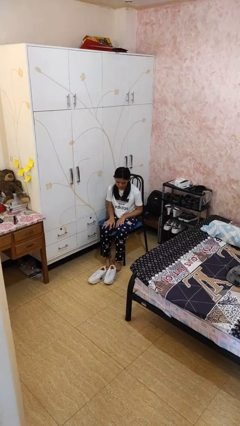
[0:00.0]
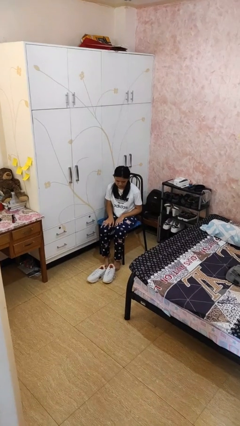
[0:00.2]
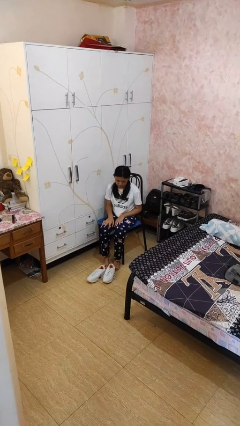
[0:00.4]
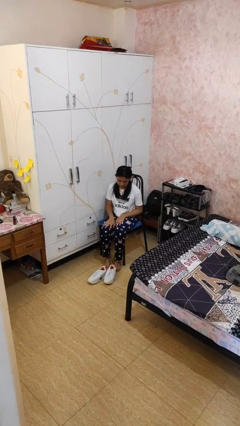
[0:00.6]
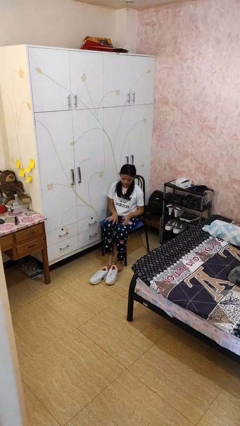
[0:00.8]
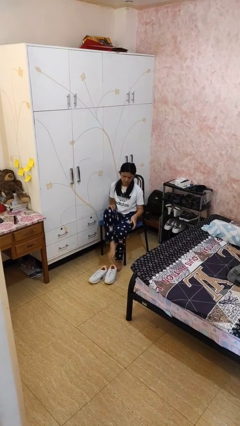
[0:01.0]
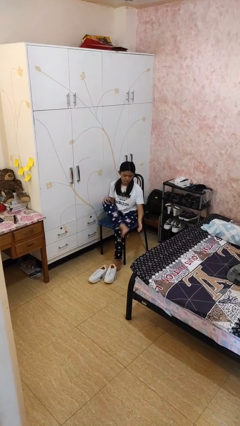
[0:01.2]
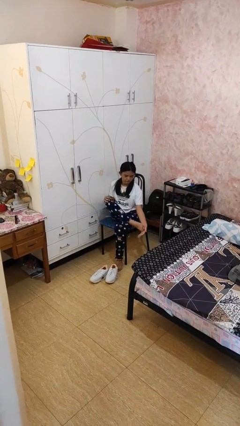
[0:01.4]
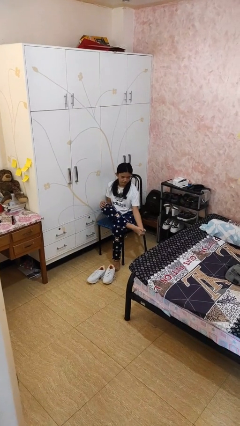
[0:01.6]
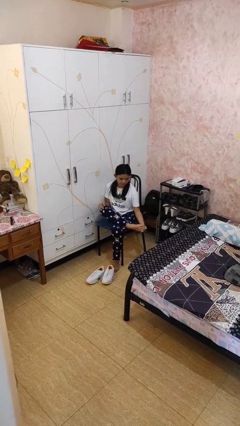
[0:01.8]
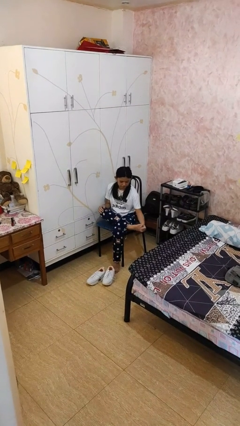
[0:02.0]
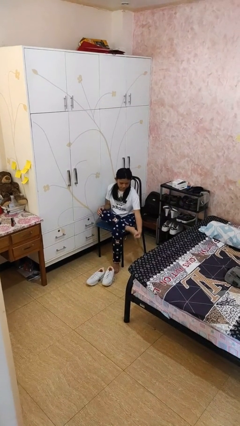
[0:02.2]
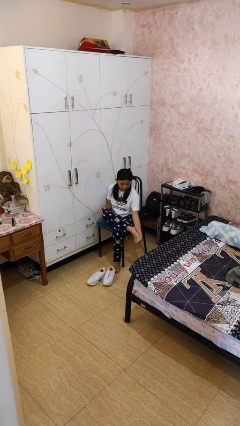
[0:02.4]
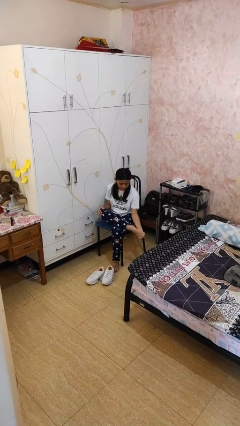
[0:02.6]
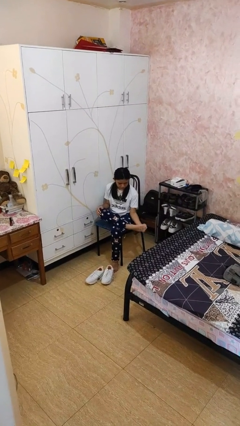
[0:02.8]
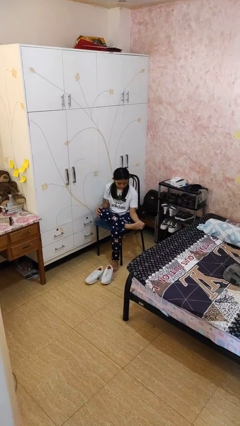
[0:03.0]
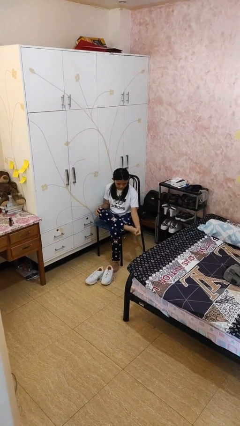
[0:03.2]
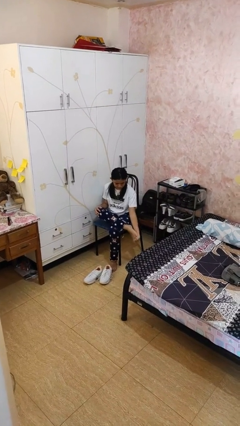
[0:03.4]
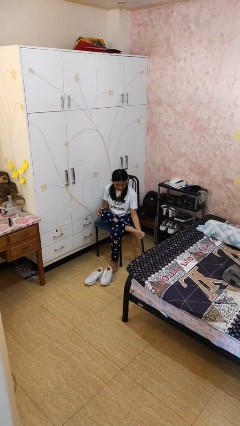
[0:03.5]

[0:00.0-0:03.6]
person rubs foot

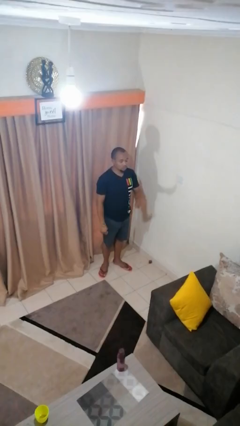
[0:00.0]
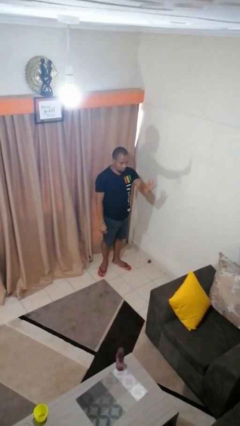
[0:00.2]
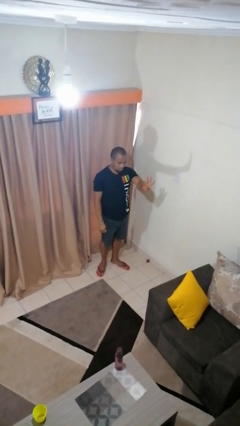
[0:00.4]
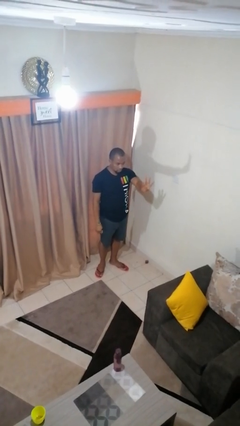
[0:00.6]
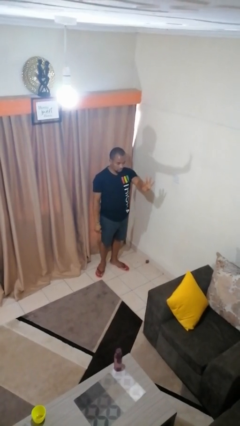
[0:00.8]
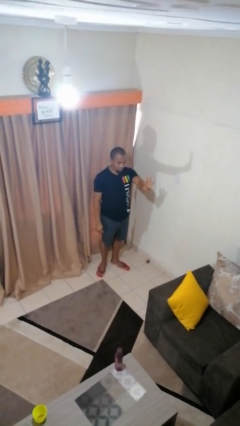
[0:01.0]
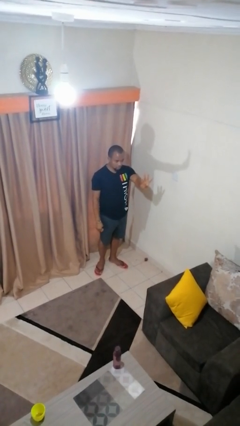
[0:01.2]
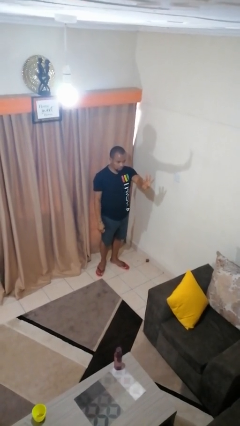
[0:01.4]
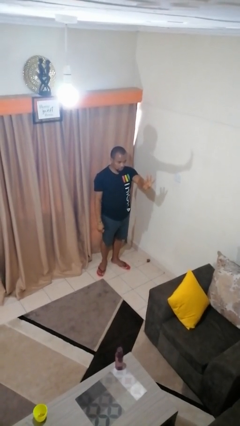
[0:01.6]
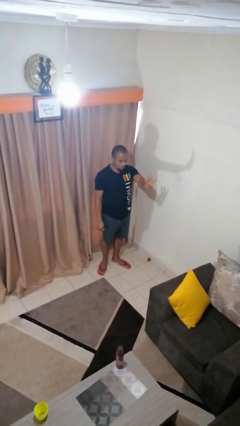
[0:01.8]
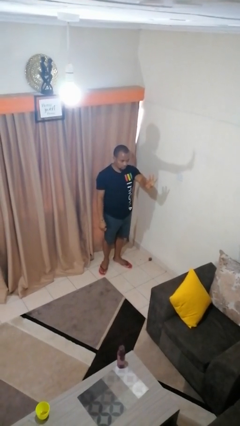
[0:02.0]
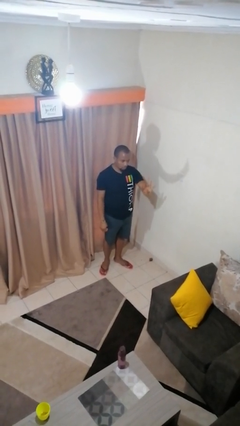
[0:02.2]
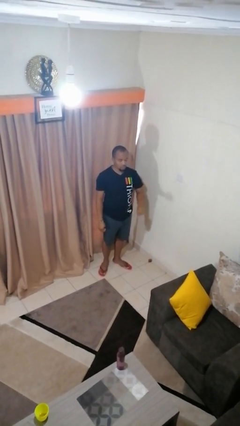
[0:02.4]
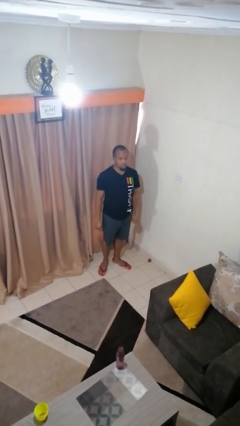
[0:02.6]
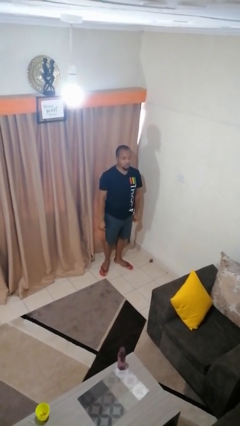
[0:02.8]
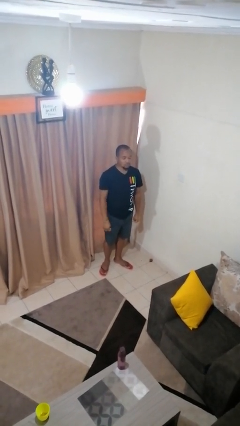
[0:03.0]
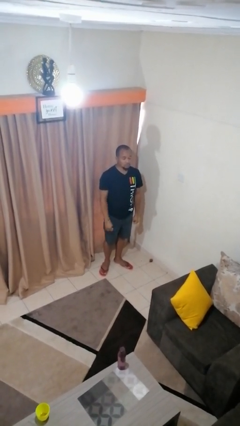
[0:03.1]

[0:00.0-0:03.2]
person gestures number four

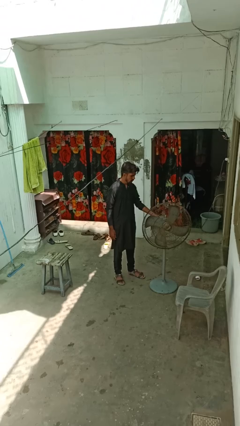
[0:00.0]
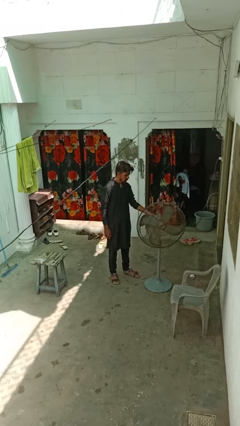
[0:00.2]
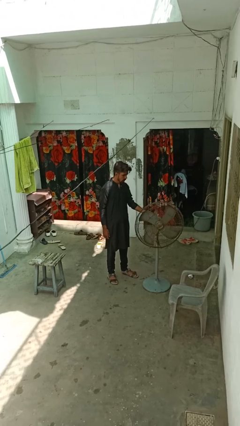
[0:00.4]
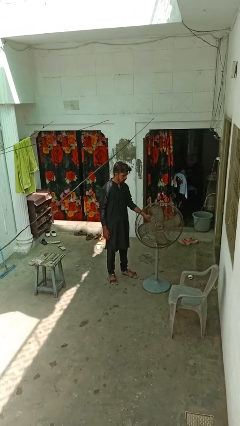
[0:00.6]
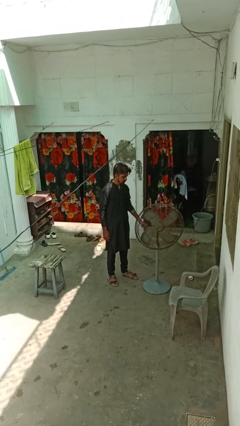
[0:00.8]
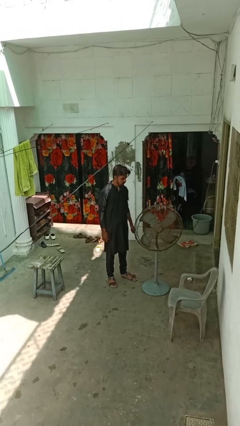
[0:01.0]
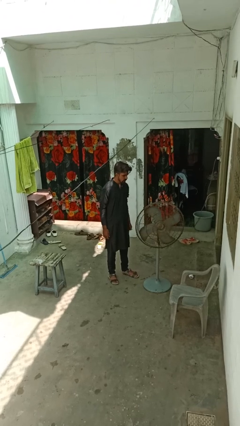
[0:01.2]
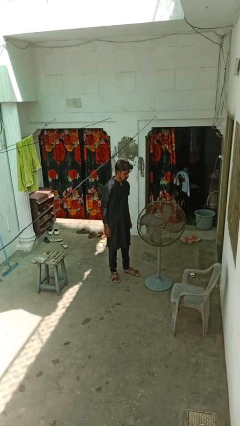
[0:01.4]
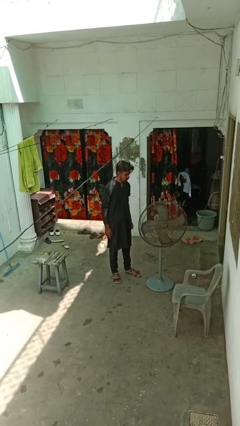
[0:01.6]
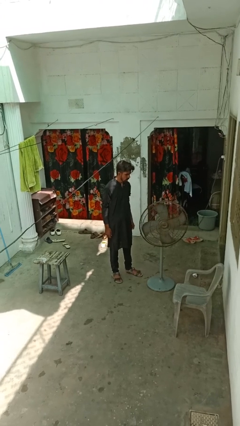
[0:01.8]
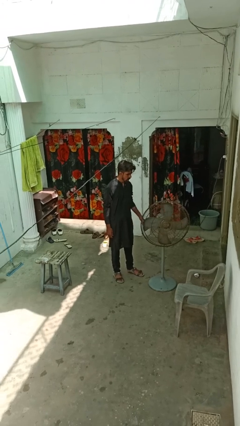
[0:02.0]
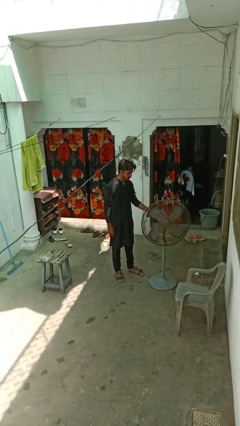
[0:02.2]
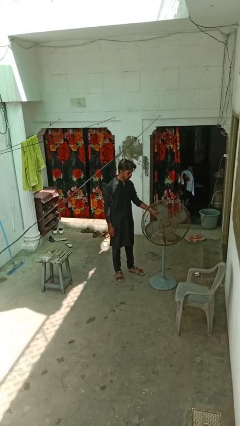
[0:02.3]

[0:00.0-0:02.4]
person turns on fan

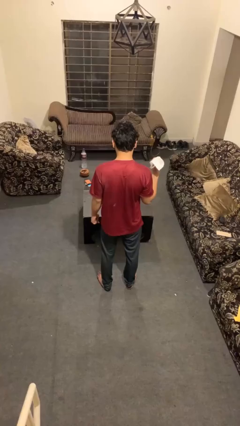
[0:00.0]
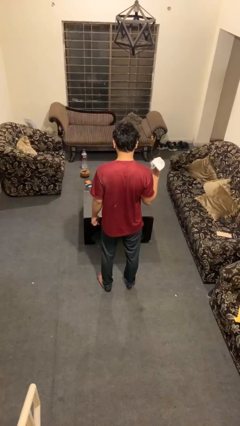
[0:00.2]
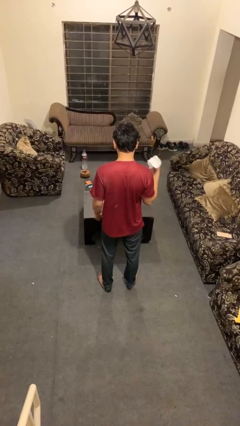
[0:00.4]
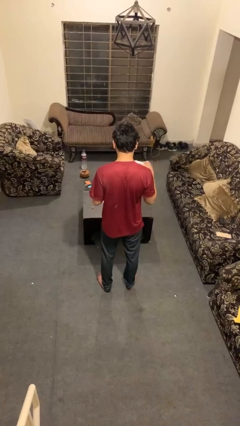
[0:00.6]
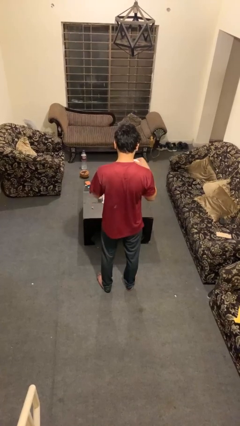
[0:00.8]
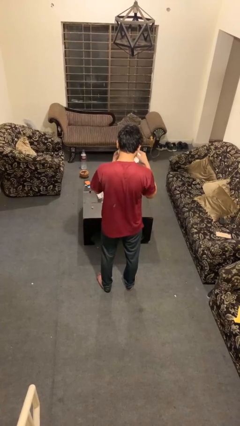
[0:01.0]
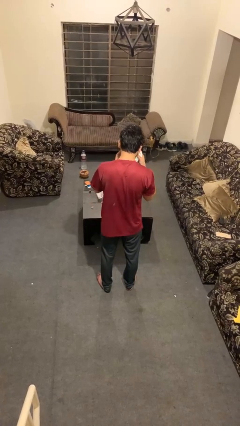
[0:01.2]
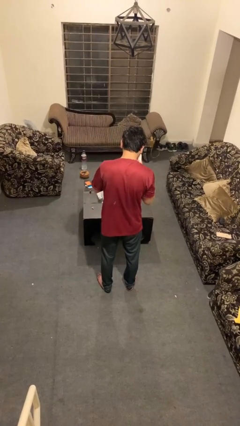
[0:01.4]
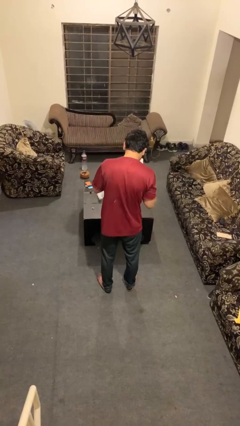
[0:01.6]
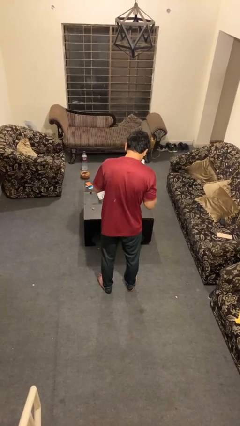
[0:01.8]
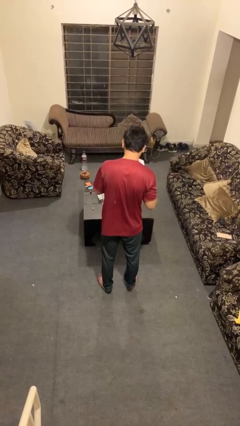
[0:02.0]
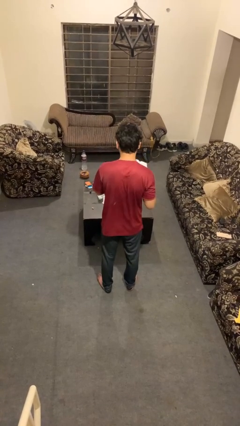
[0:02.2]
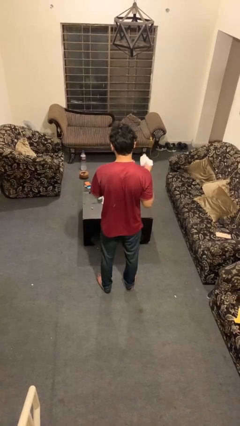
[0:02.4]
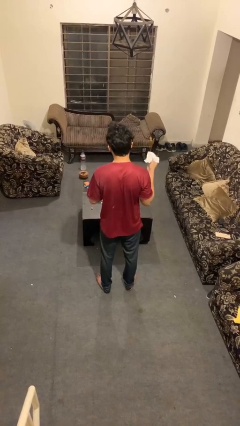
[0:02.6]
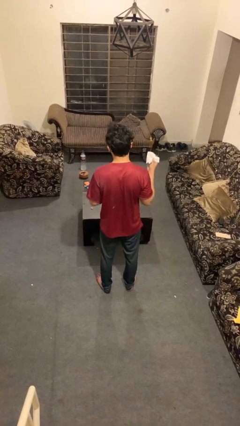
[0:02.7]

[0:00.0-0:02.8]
person blows nose

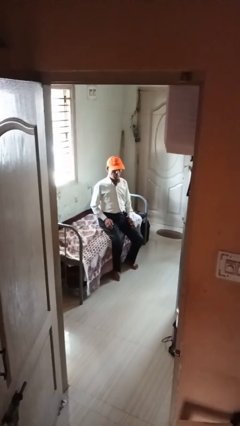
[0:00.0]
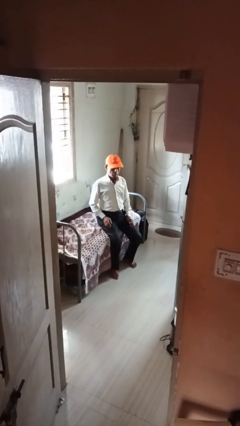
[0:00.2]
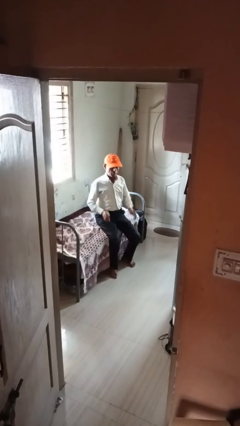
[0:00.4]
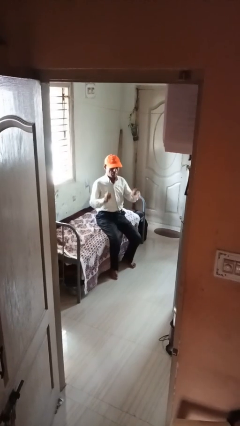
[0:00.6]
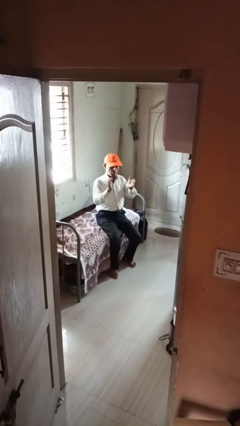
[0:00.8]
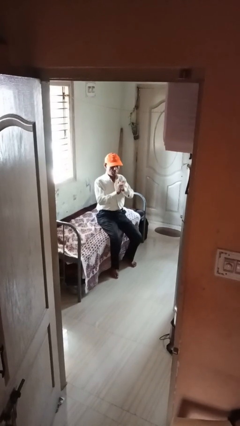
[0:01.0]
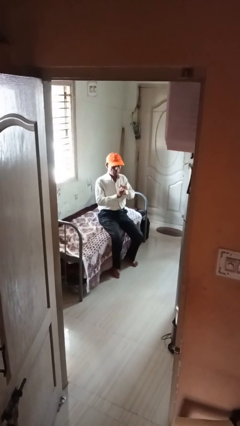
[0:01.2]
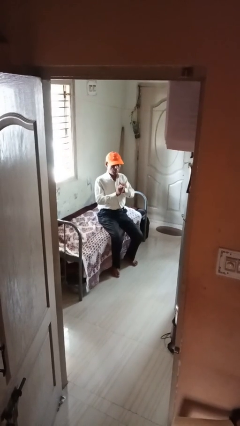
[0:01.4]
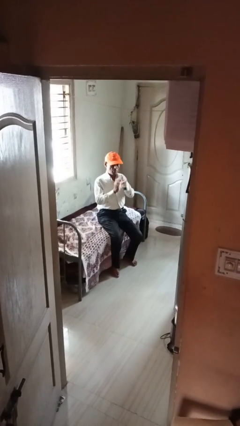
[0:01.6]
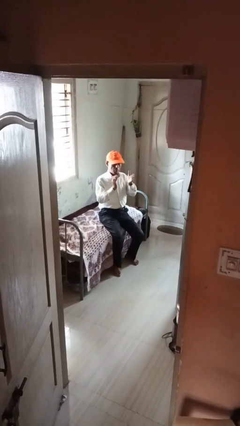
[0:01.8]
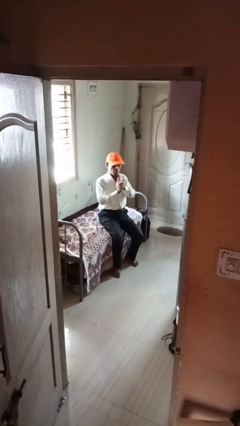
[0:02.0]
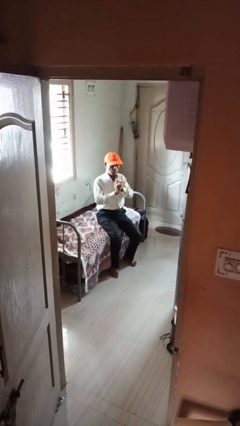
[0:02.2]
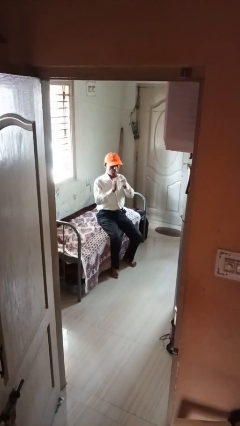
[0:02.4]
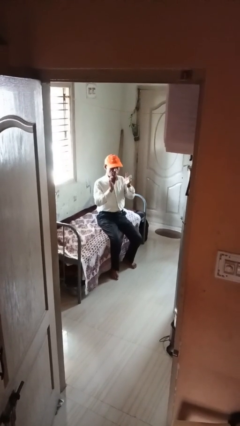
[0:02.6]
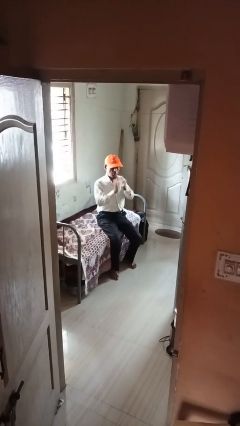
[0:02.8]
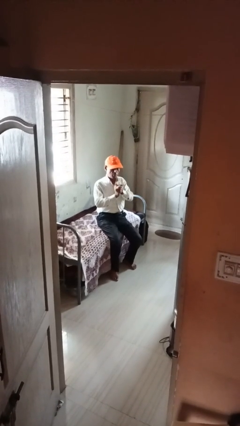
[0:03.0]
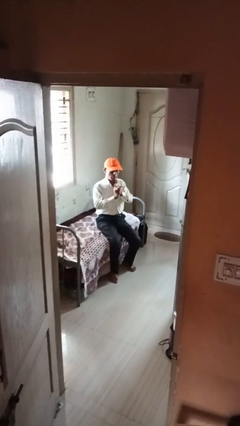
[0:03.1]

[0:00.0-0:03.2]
person claps hands

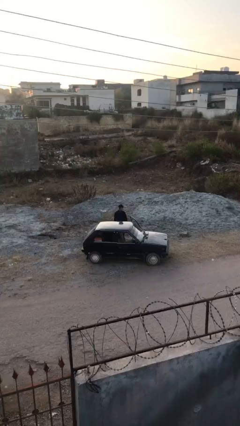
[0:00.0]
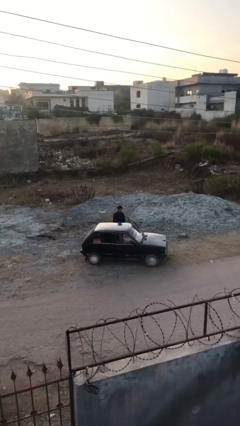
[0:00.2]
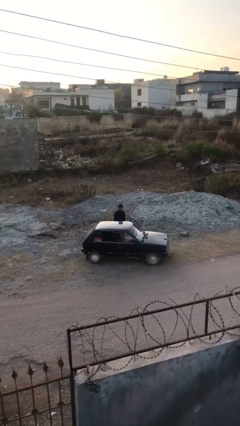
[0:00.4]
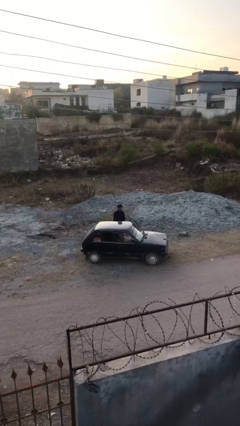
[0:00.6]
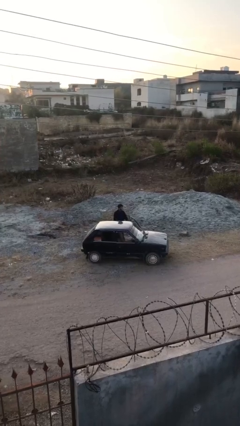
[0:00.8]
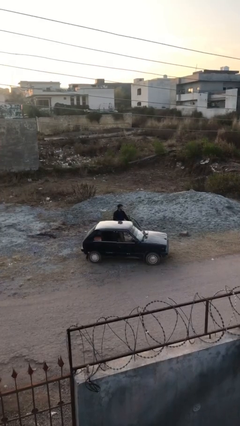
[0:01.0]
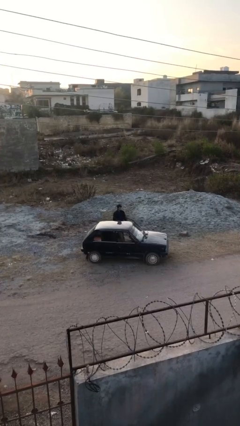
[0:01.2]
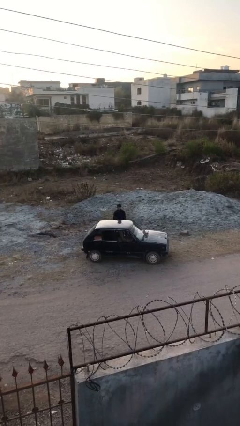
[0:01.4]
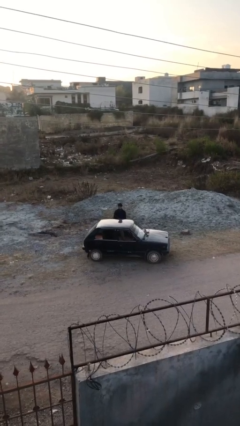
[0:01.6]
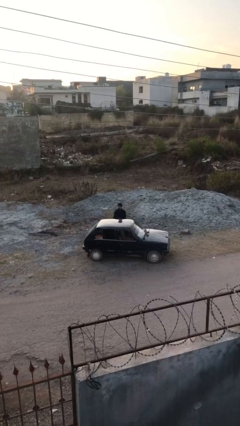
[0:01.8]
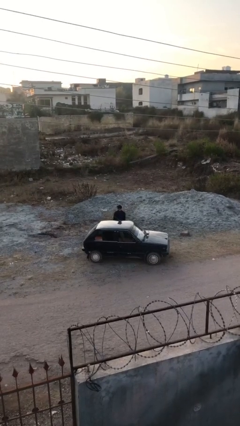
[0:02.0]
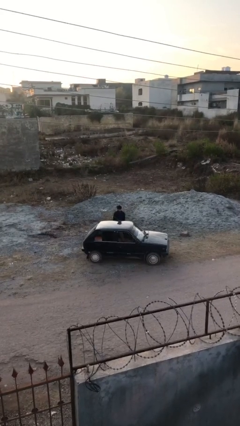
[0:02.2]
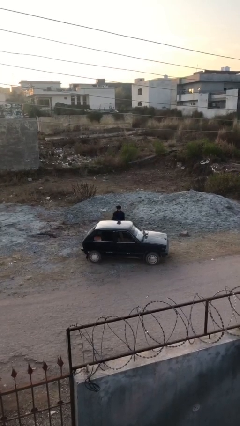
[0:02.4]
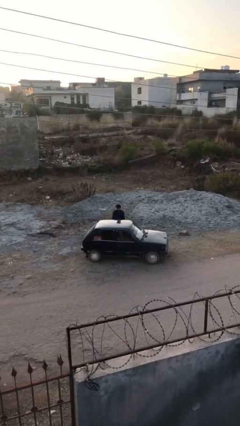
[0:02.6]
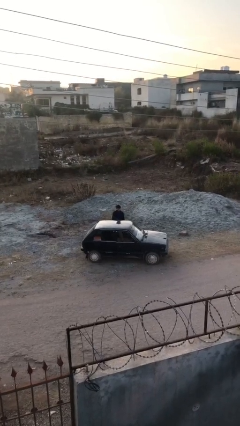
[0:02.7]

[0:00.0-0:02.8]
person closes car door
